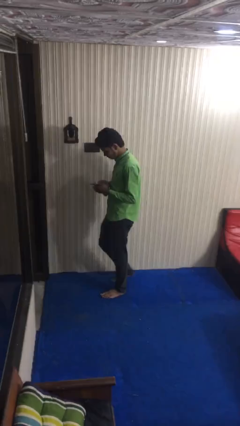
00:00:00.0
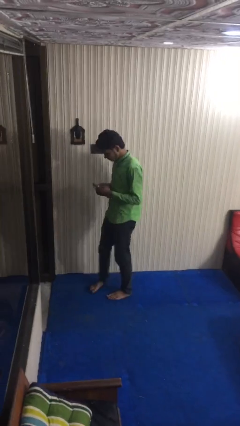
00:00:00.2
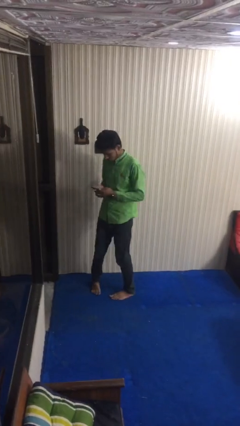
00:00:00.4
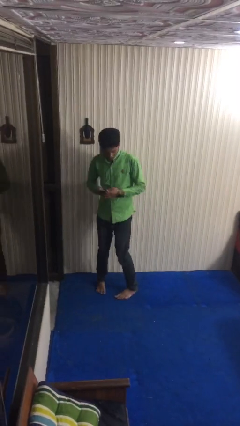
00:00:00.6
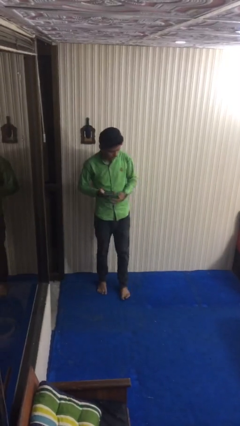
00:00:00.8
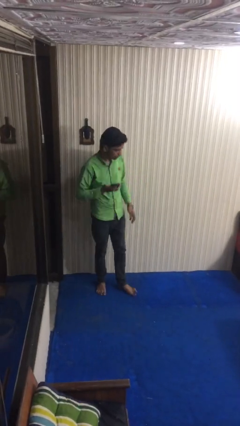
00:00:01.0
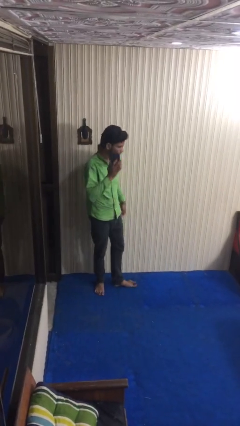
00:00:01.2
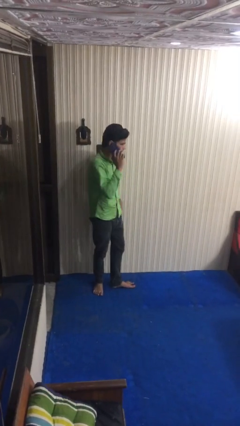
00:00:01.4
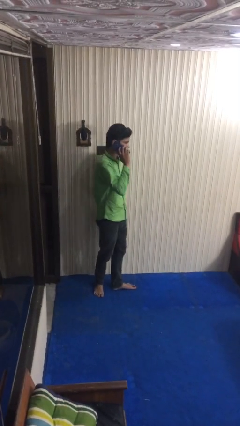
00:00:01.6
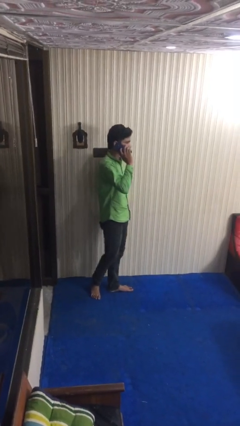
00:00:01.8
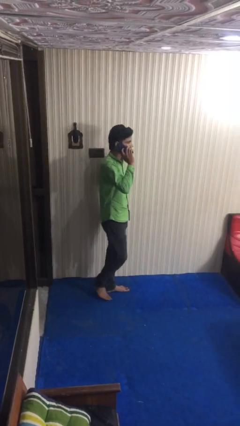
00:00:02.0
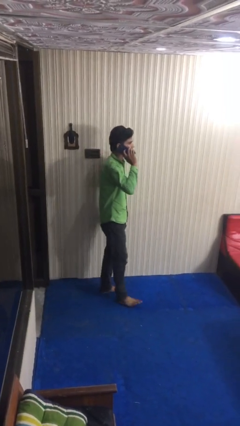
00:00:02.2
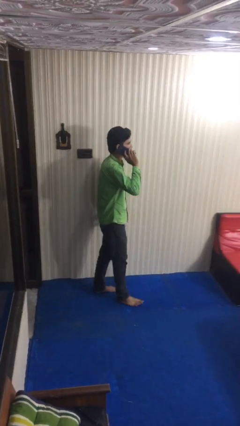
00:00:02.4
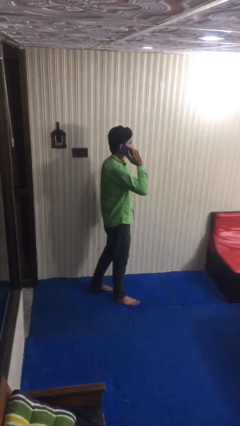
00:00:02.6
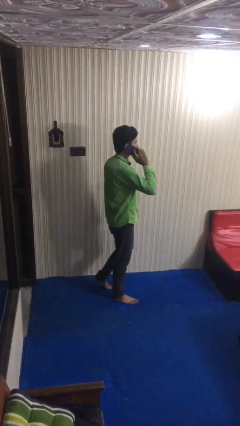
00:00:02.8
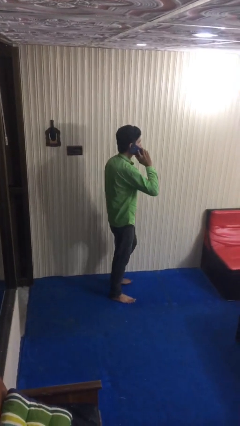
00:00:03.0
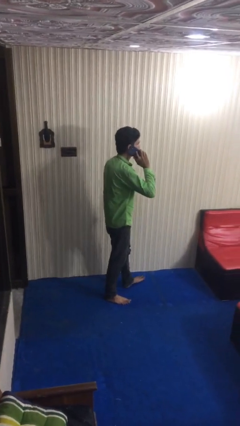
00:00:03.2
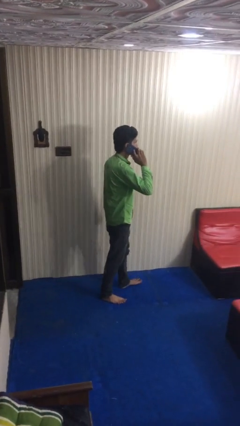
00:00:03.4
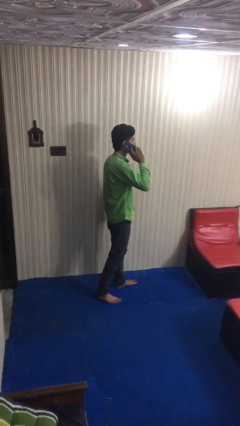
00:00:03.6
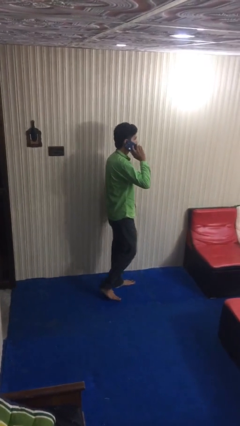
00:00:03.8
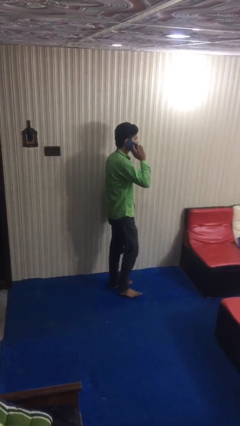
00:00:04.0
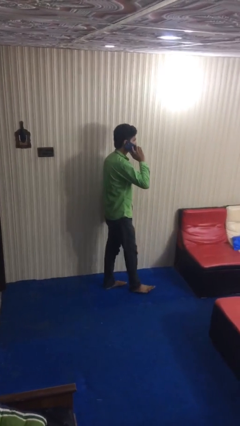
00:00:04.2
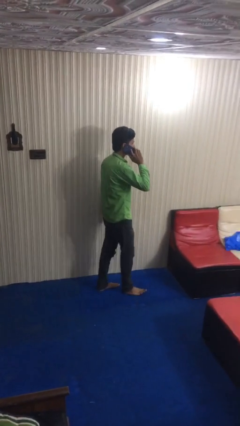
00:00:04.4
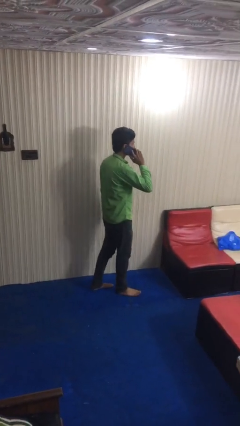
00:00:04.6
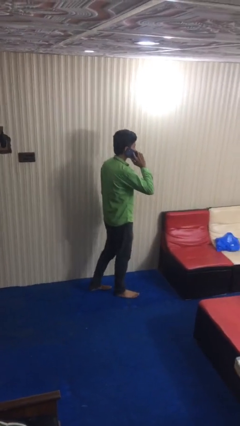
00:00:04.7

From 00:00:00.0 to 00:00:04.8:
person talks on phone

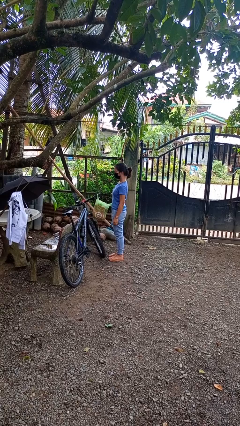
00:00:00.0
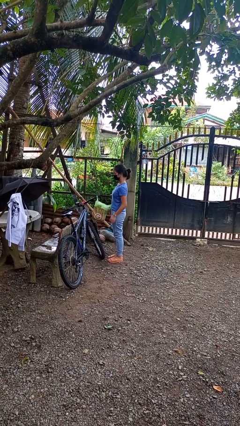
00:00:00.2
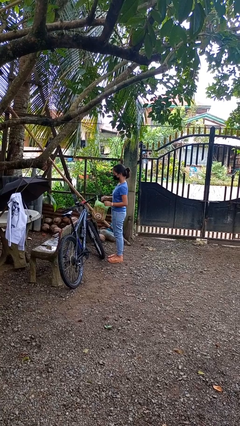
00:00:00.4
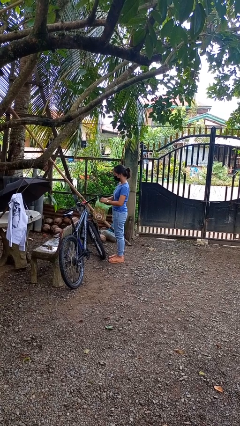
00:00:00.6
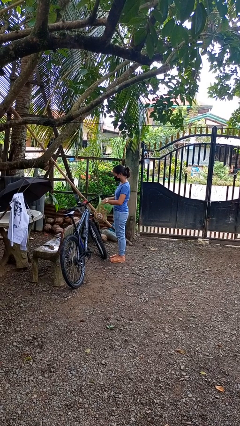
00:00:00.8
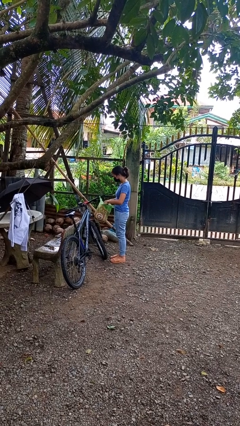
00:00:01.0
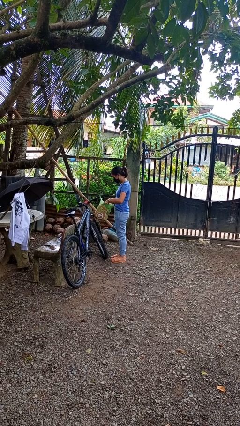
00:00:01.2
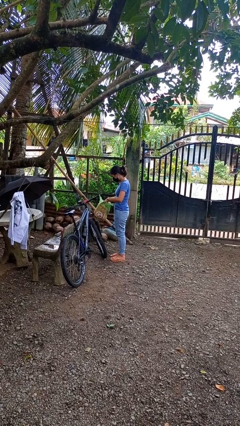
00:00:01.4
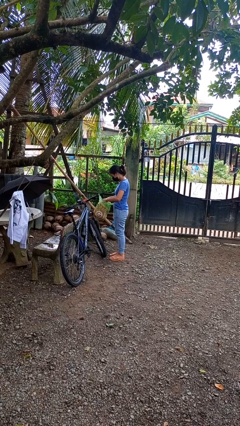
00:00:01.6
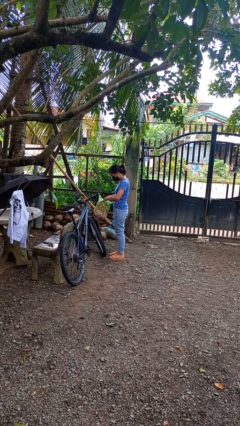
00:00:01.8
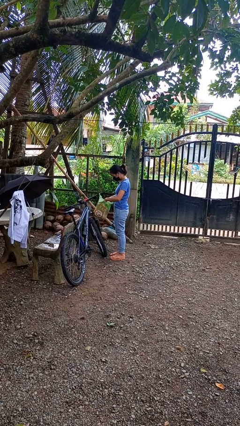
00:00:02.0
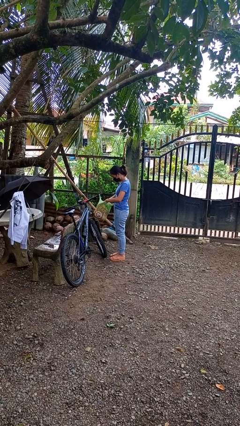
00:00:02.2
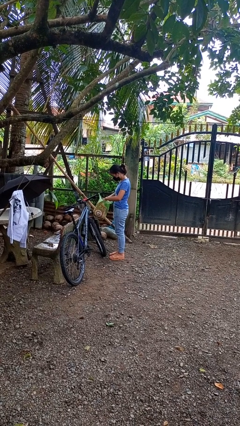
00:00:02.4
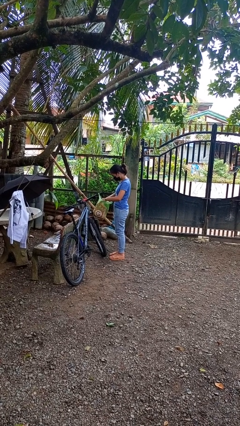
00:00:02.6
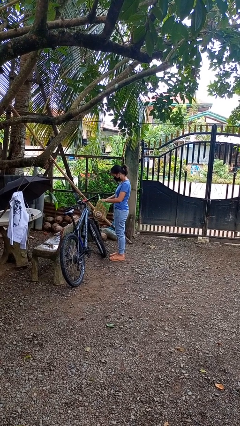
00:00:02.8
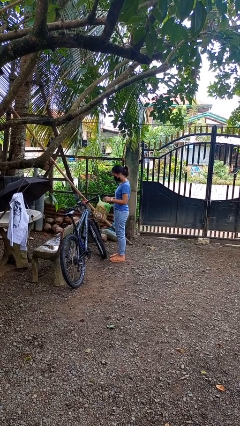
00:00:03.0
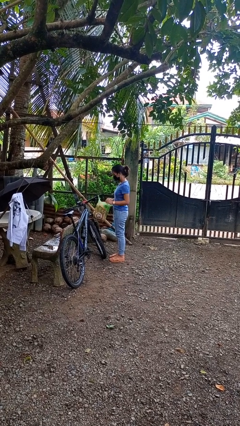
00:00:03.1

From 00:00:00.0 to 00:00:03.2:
person searches in bag

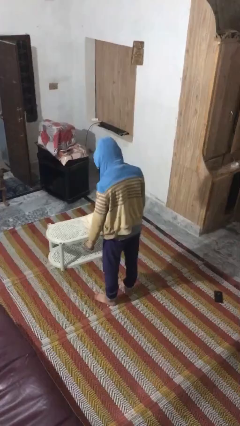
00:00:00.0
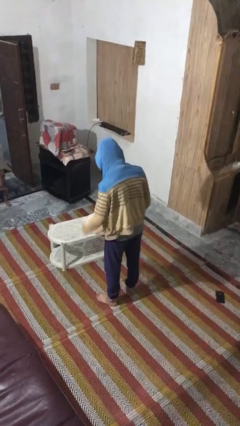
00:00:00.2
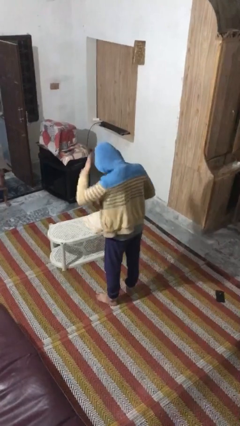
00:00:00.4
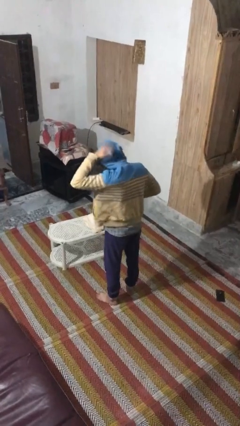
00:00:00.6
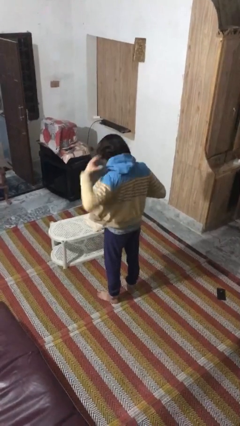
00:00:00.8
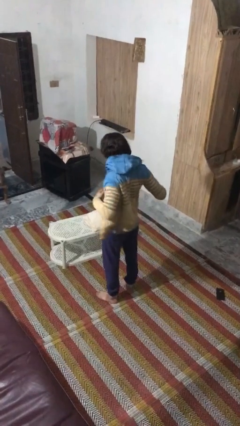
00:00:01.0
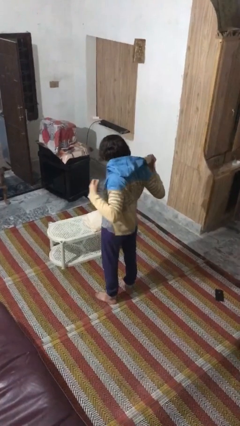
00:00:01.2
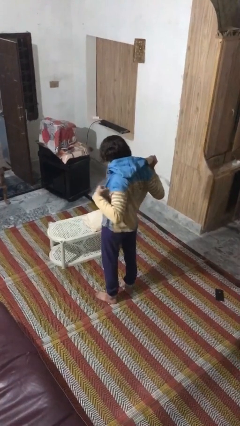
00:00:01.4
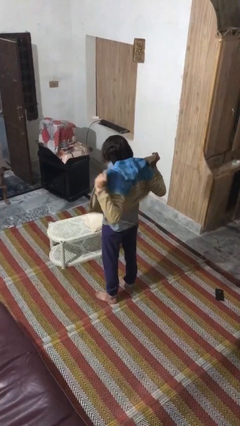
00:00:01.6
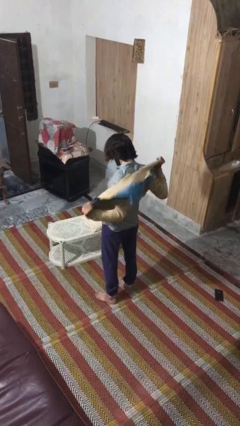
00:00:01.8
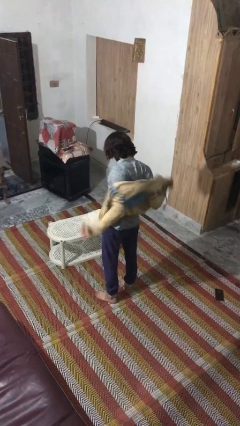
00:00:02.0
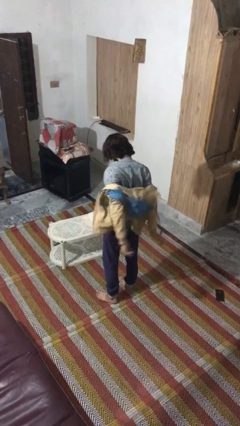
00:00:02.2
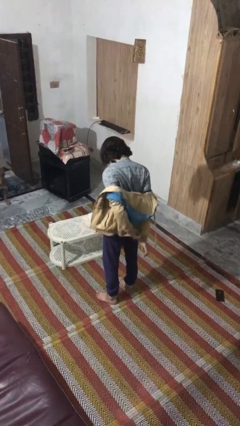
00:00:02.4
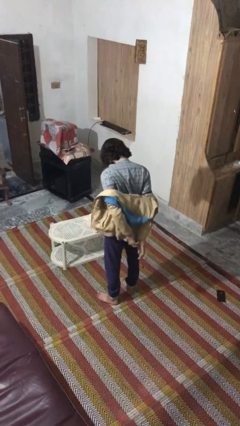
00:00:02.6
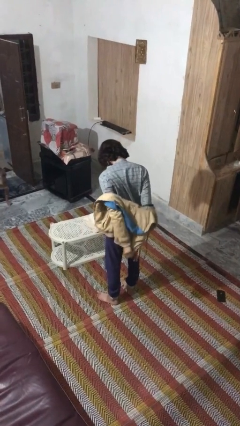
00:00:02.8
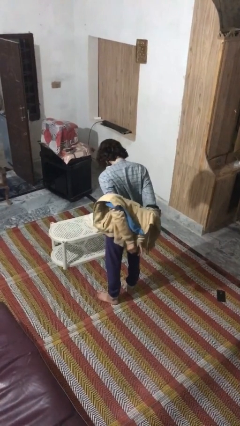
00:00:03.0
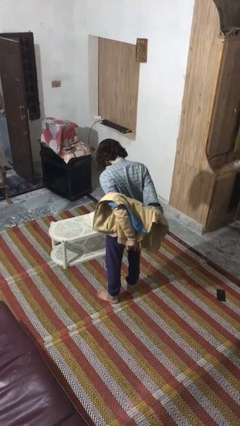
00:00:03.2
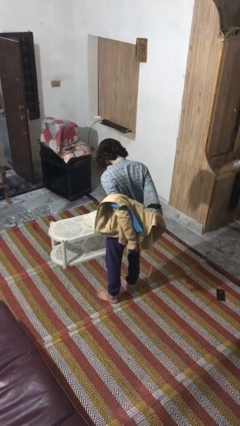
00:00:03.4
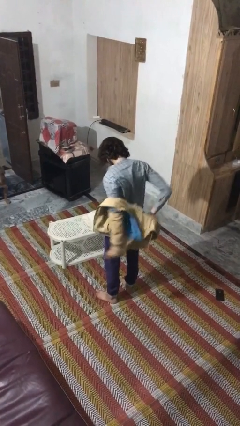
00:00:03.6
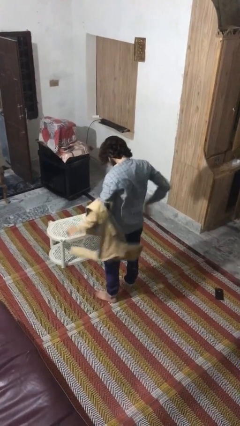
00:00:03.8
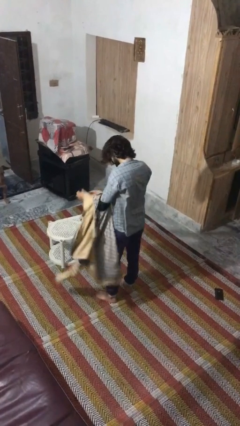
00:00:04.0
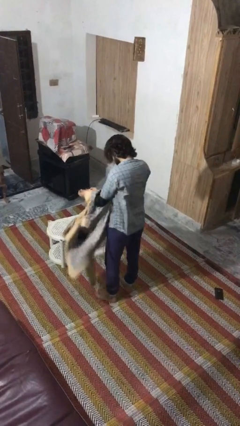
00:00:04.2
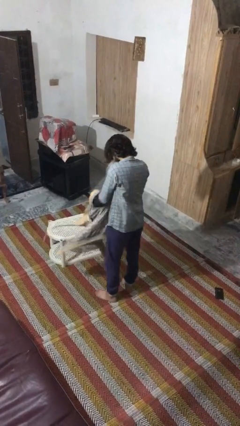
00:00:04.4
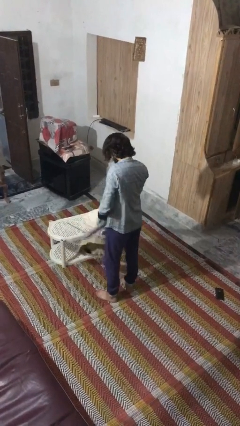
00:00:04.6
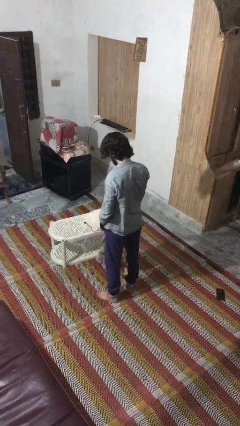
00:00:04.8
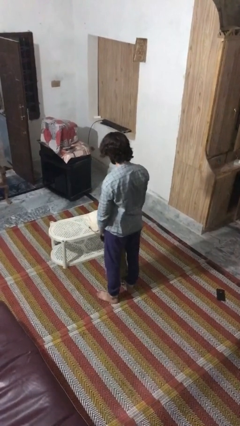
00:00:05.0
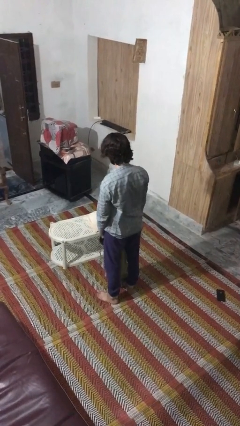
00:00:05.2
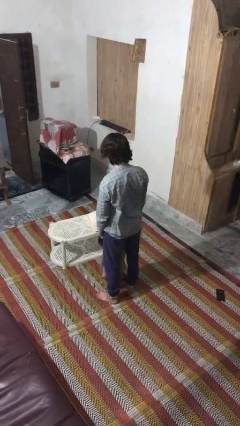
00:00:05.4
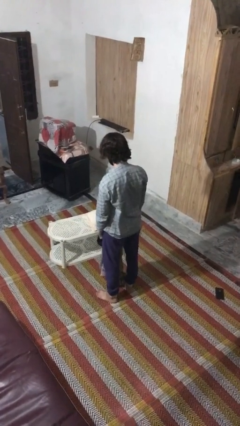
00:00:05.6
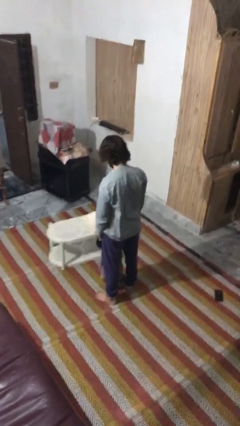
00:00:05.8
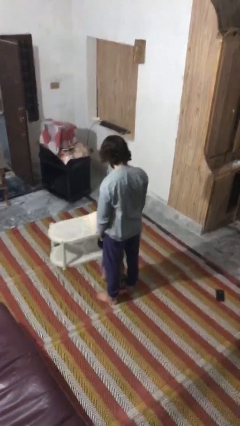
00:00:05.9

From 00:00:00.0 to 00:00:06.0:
person takes off hoodie

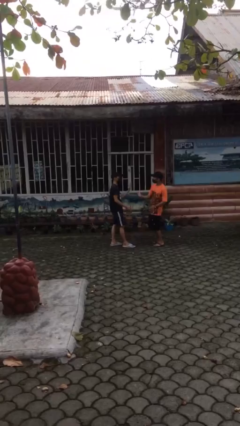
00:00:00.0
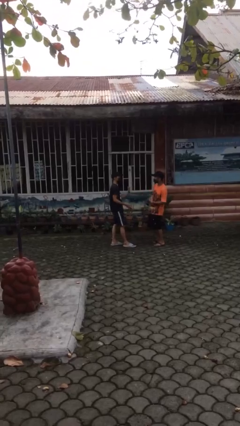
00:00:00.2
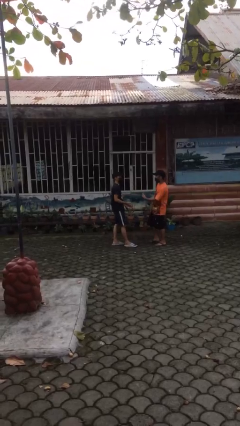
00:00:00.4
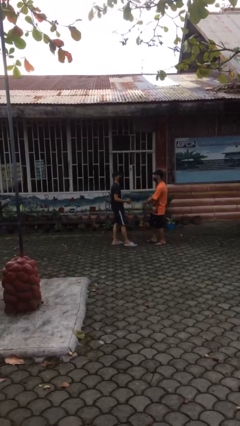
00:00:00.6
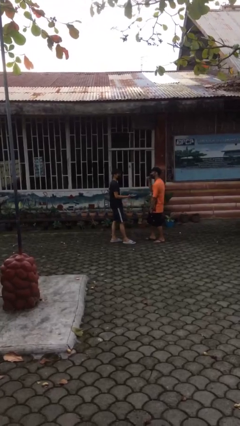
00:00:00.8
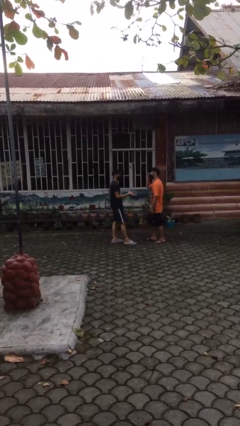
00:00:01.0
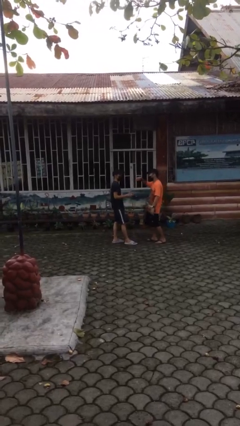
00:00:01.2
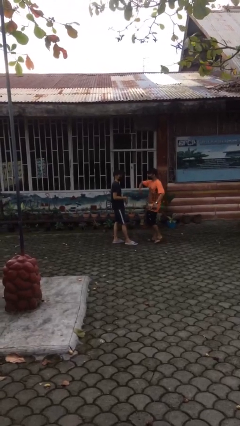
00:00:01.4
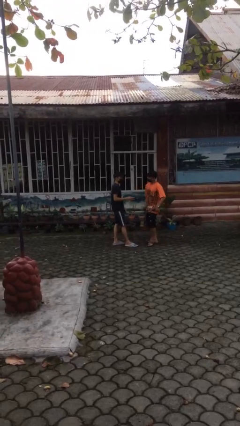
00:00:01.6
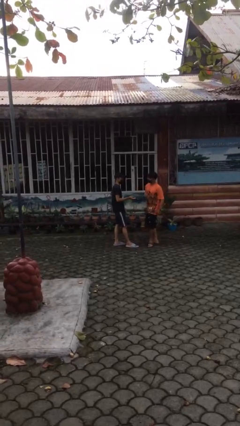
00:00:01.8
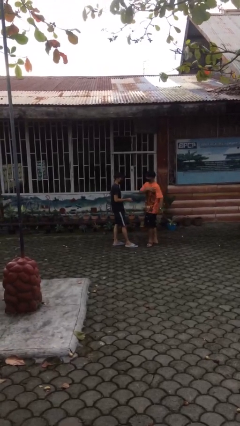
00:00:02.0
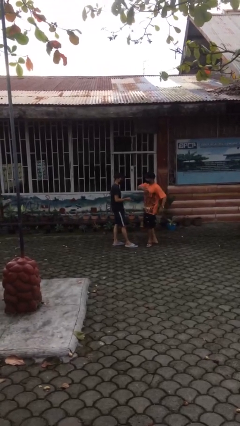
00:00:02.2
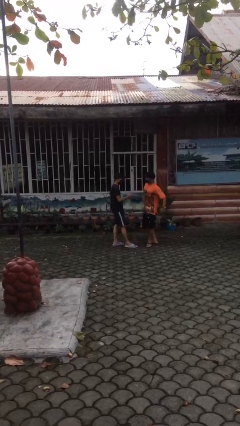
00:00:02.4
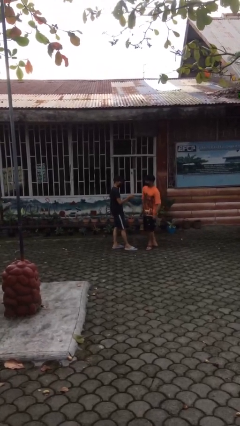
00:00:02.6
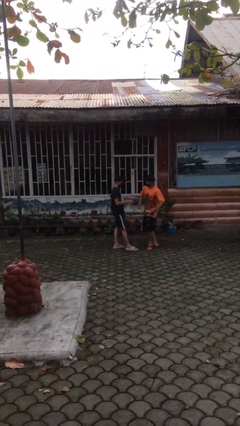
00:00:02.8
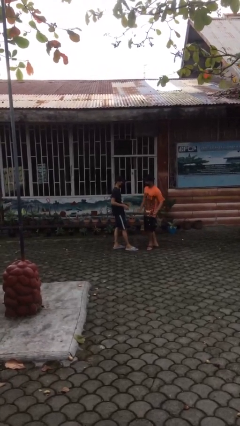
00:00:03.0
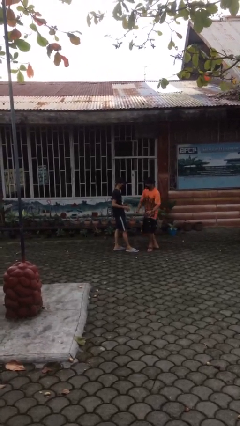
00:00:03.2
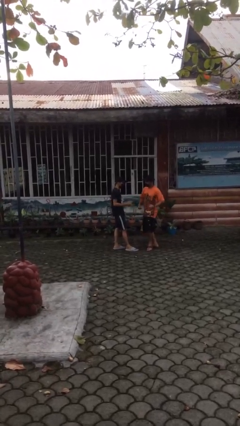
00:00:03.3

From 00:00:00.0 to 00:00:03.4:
person talks to person

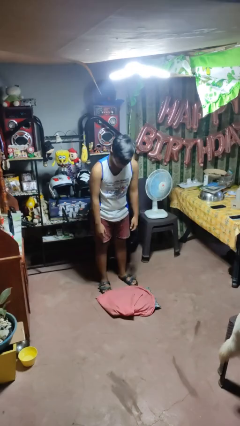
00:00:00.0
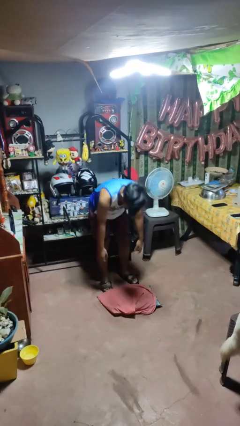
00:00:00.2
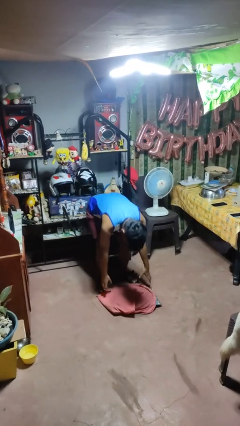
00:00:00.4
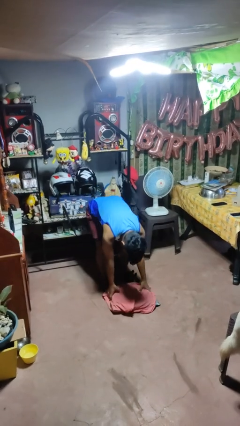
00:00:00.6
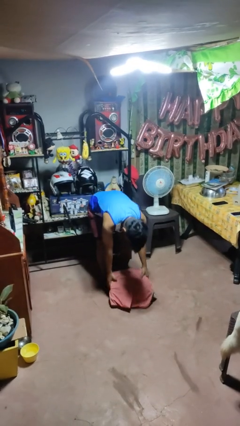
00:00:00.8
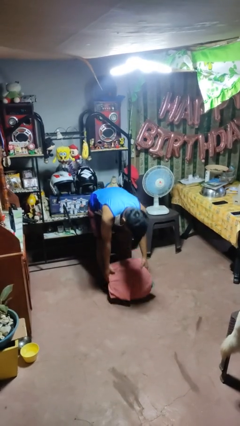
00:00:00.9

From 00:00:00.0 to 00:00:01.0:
person picks up object from floor
